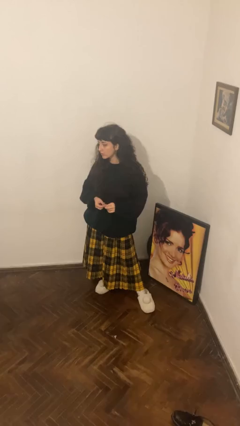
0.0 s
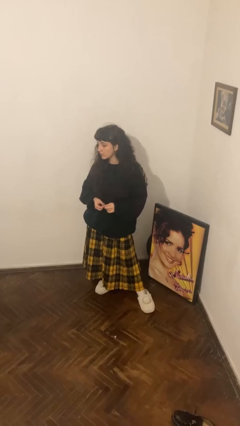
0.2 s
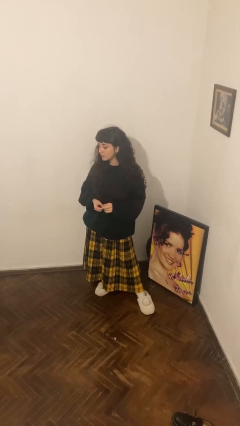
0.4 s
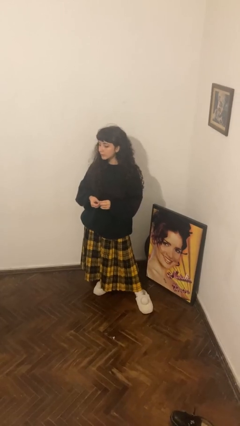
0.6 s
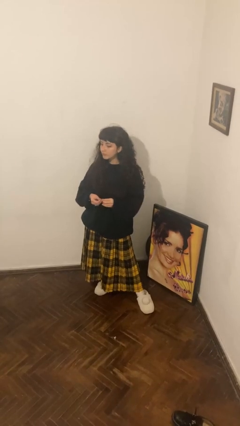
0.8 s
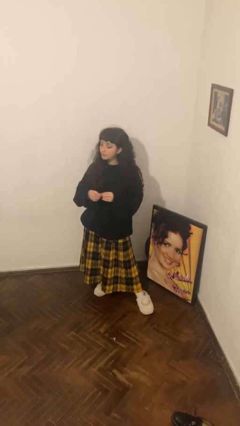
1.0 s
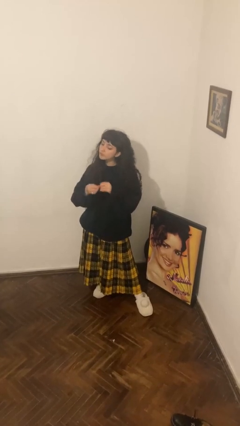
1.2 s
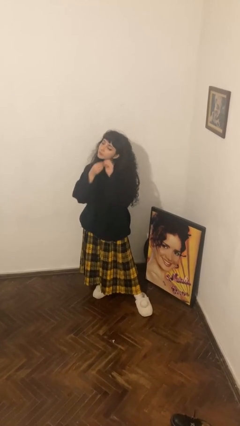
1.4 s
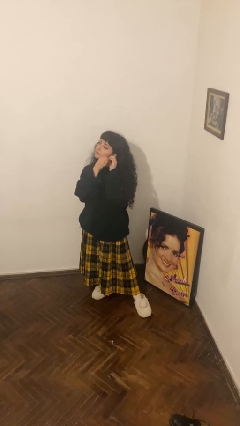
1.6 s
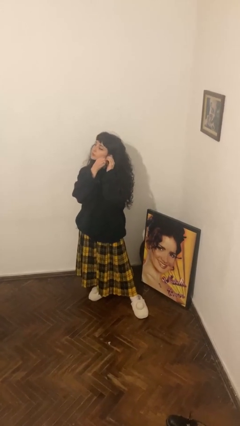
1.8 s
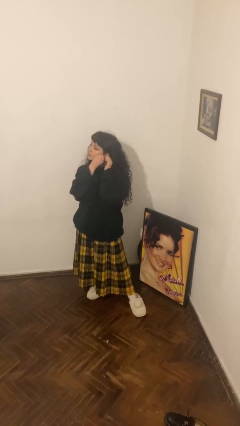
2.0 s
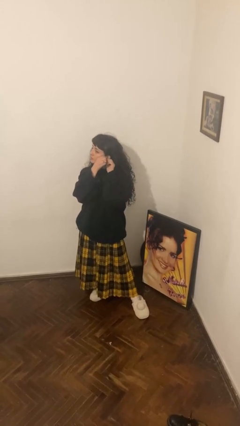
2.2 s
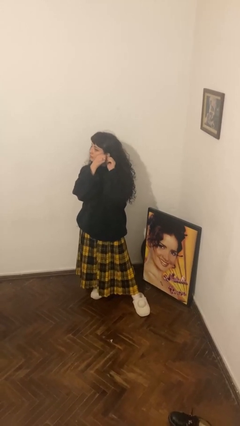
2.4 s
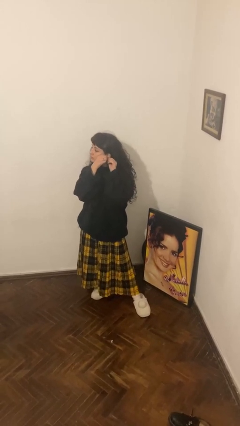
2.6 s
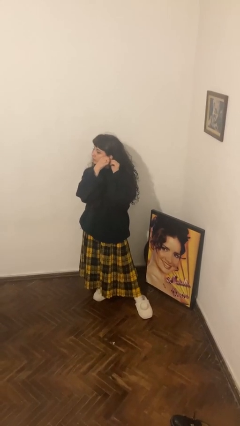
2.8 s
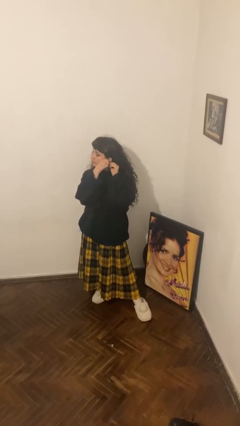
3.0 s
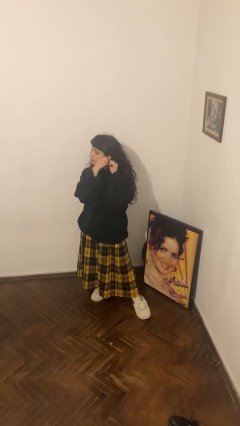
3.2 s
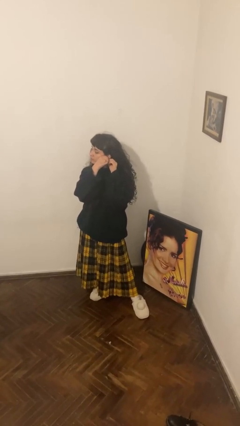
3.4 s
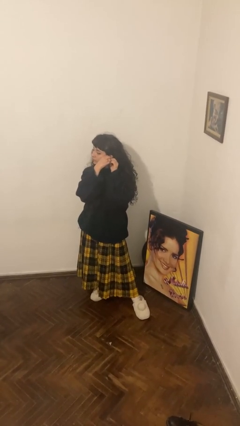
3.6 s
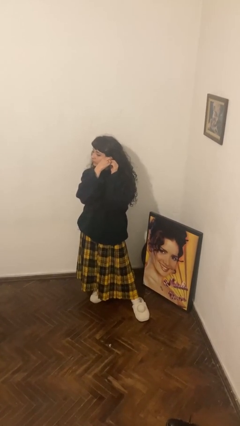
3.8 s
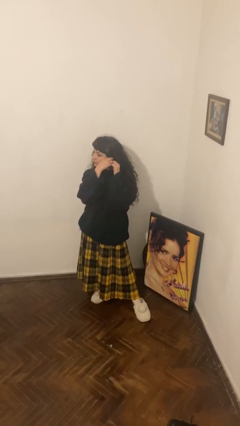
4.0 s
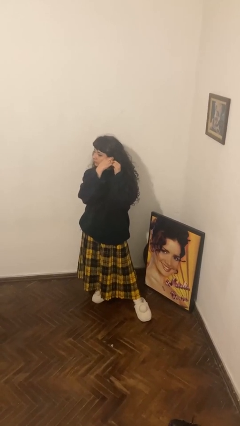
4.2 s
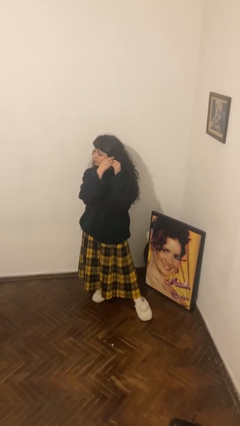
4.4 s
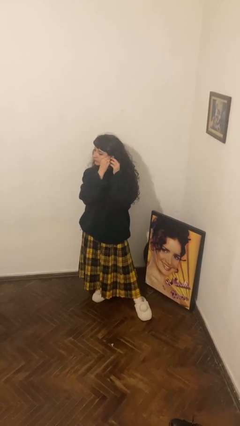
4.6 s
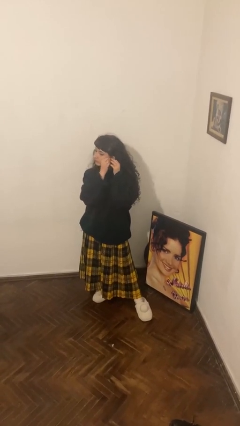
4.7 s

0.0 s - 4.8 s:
person puts on earrings

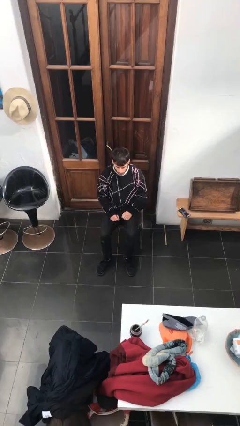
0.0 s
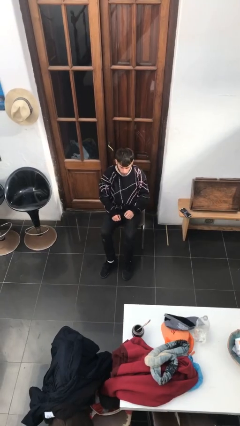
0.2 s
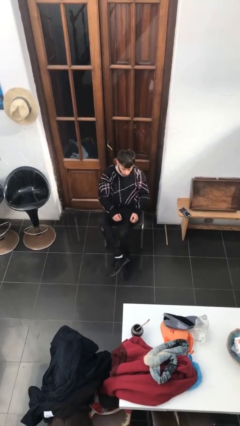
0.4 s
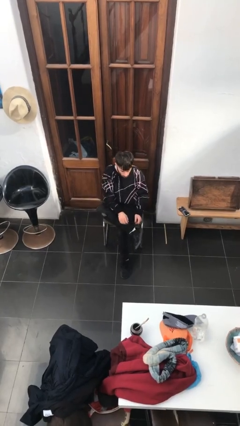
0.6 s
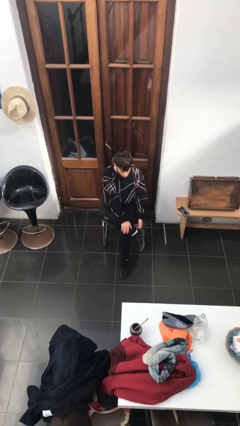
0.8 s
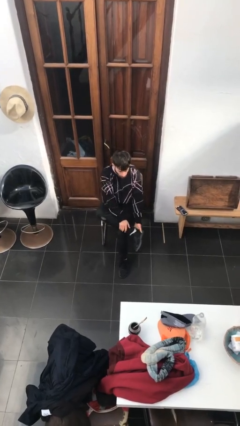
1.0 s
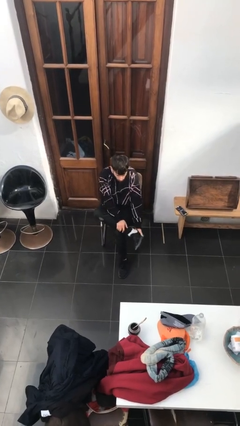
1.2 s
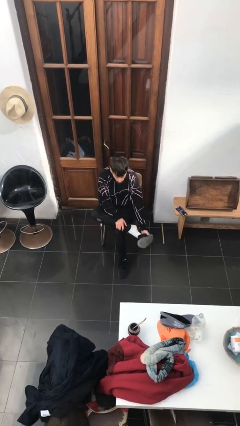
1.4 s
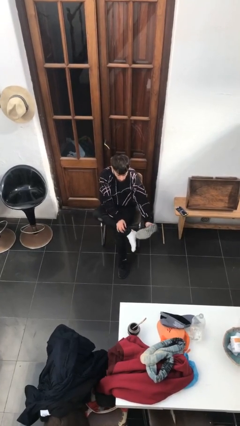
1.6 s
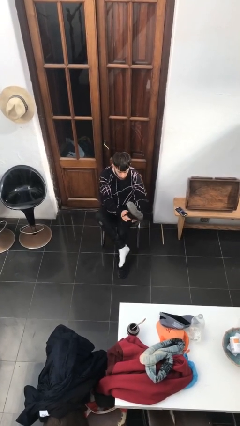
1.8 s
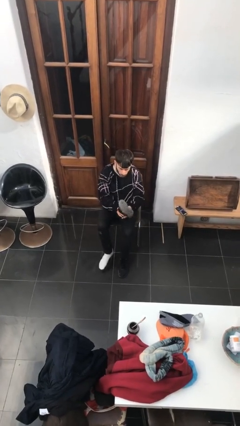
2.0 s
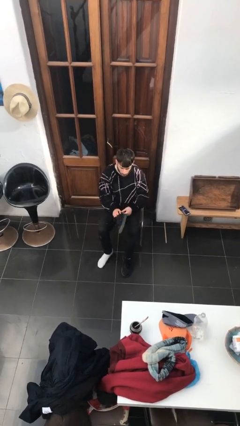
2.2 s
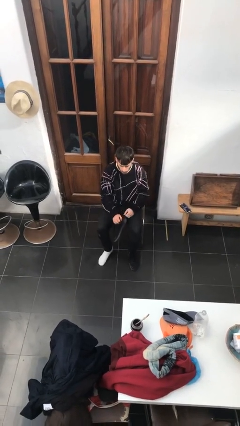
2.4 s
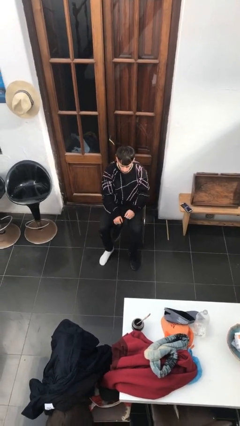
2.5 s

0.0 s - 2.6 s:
person takes off shoes

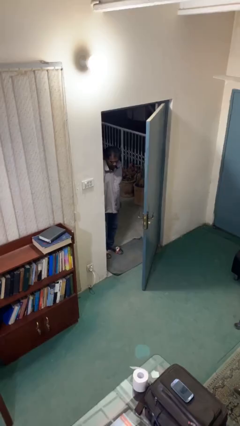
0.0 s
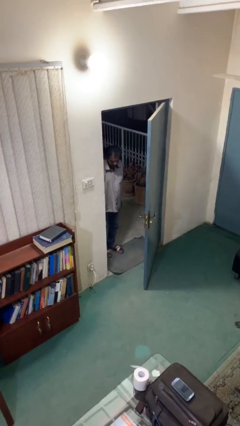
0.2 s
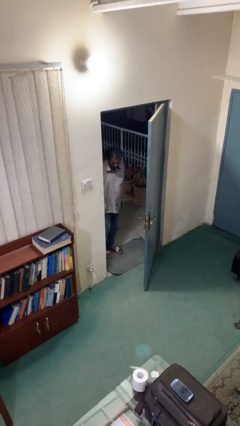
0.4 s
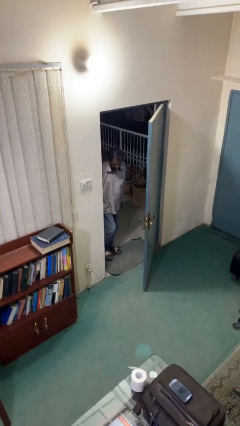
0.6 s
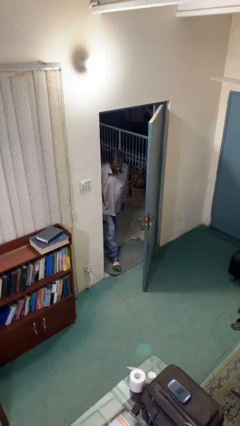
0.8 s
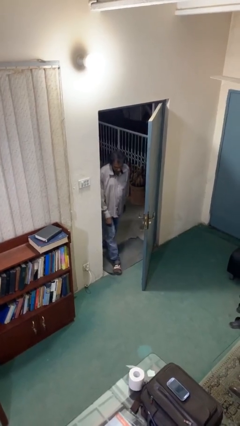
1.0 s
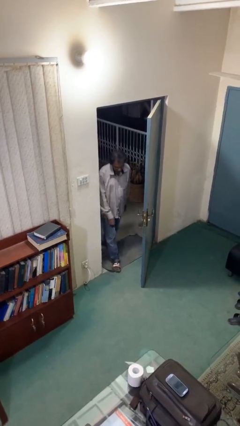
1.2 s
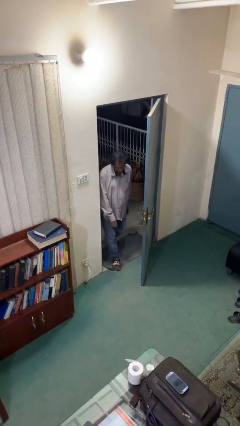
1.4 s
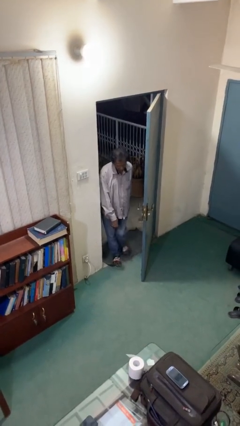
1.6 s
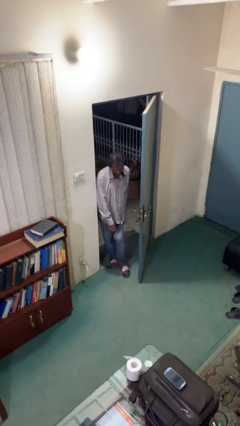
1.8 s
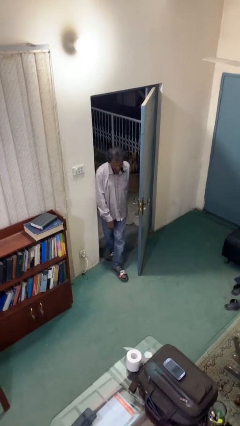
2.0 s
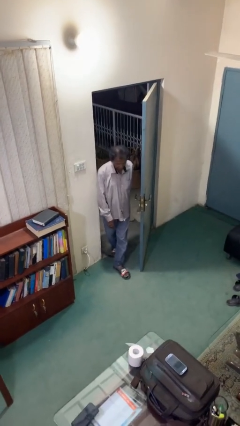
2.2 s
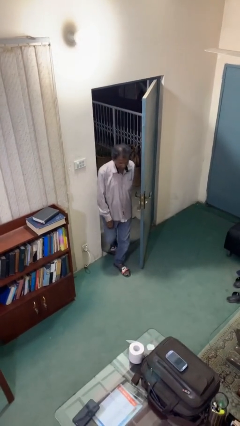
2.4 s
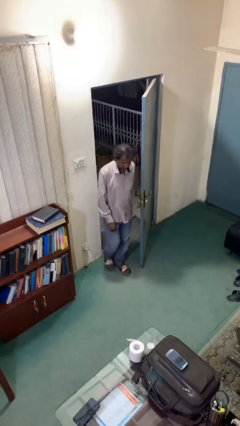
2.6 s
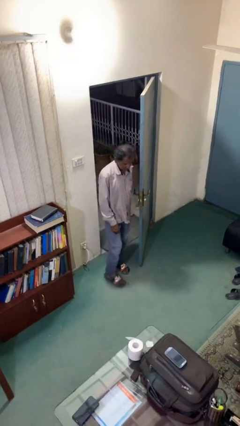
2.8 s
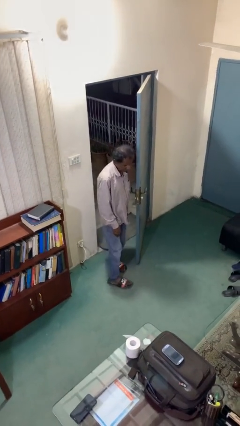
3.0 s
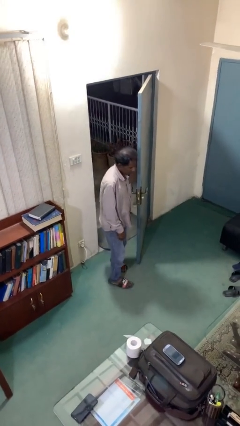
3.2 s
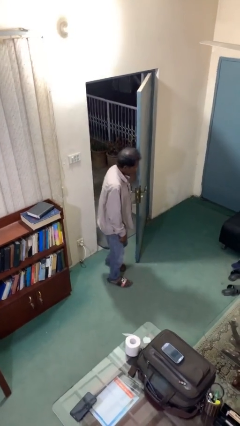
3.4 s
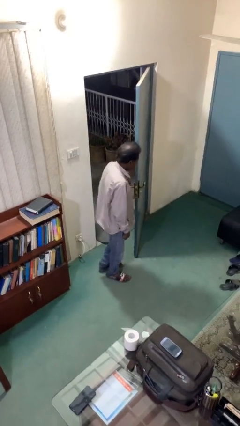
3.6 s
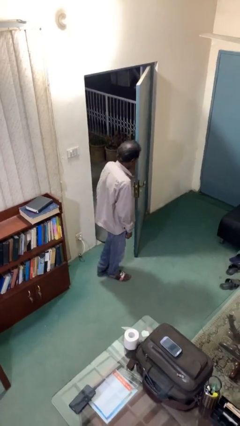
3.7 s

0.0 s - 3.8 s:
person enters scene through structure

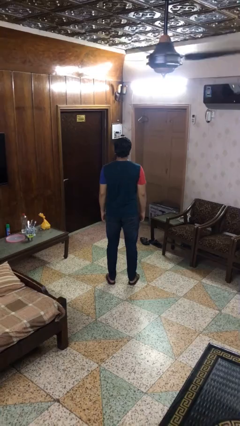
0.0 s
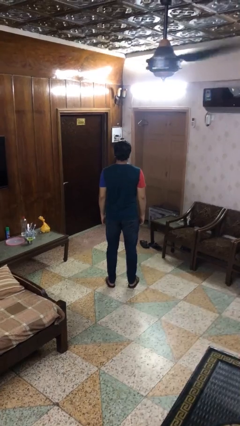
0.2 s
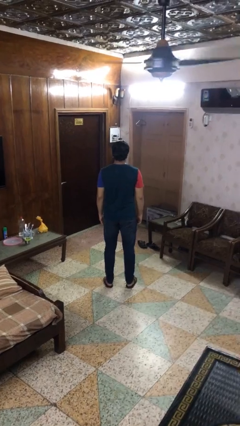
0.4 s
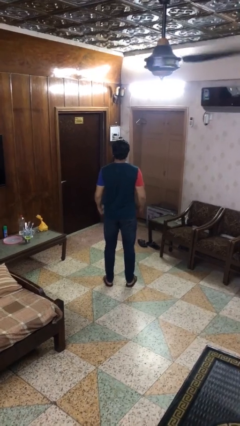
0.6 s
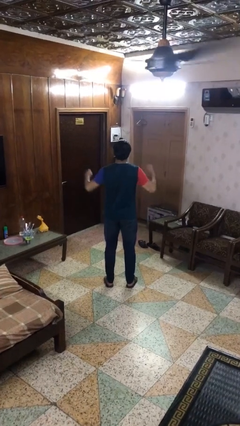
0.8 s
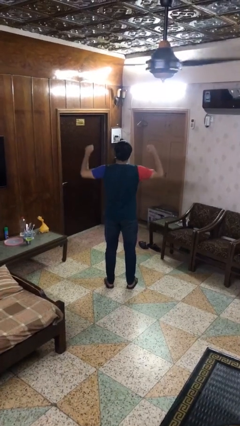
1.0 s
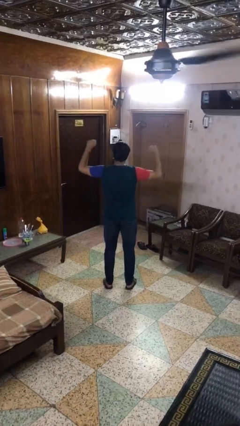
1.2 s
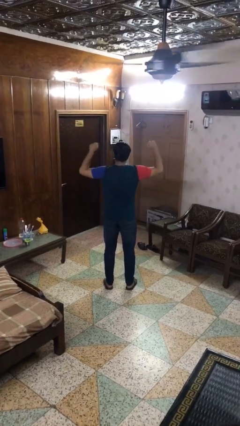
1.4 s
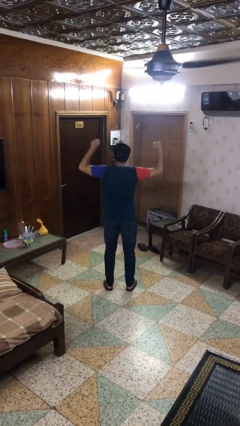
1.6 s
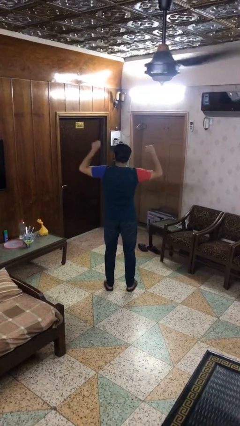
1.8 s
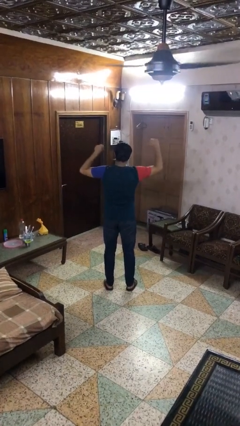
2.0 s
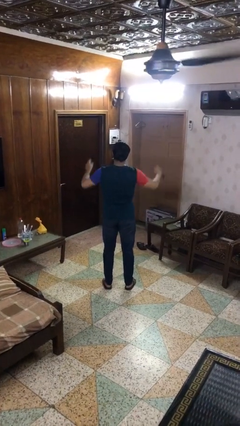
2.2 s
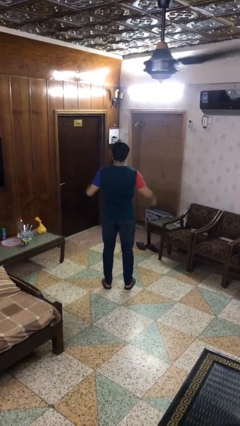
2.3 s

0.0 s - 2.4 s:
person dances in place

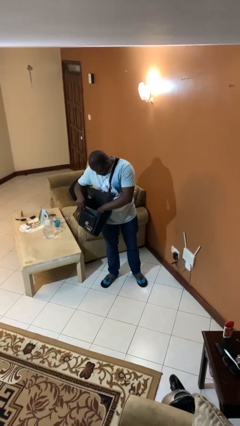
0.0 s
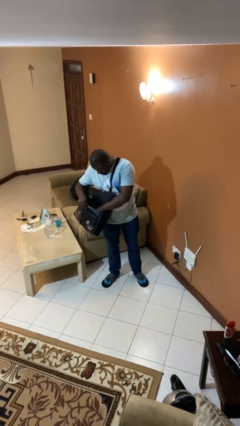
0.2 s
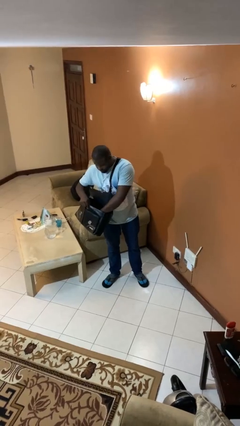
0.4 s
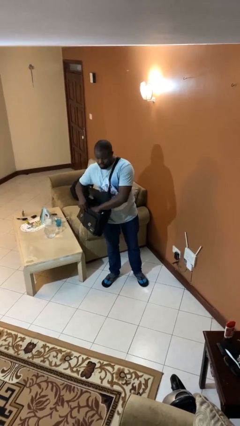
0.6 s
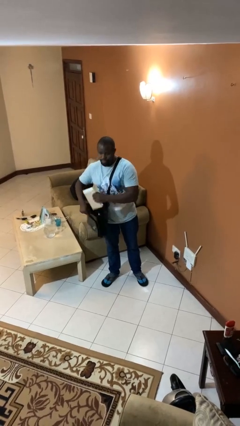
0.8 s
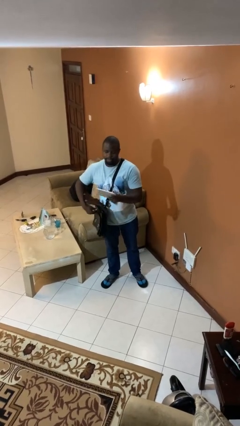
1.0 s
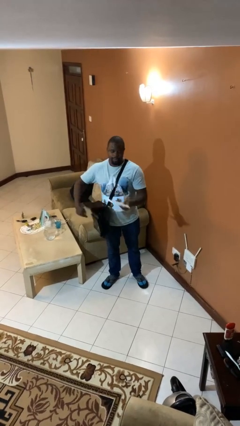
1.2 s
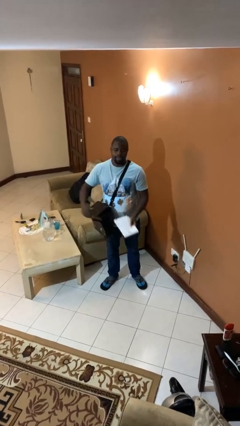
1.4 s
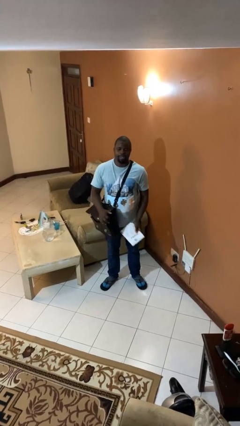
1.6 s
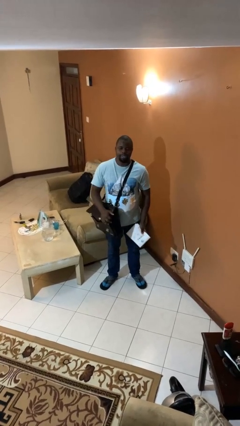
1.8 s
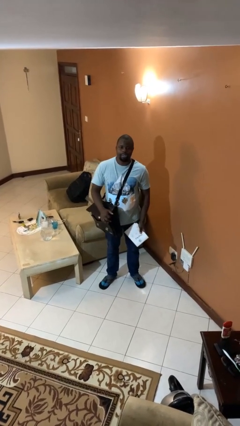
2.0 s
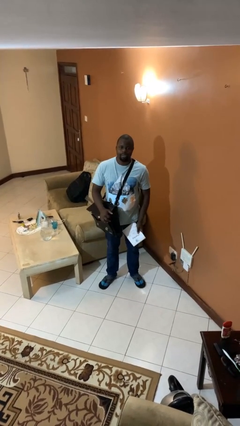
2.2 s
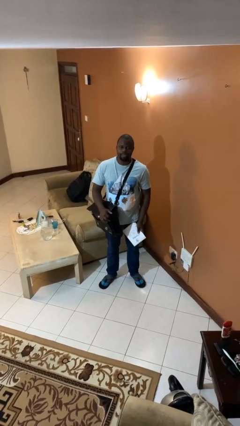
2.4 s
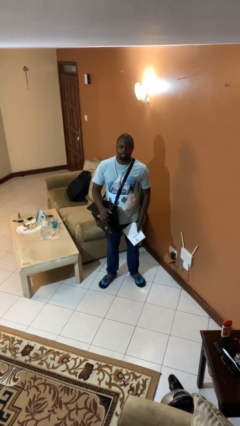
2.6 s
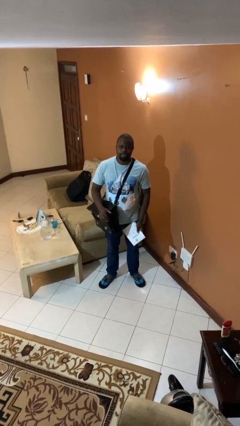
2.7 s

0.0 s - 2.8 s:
person takes object from purse

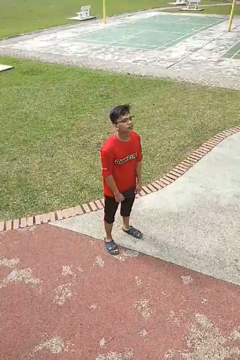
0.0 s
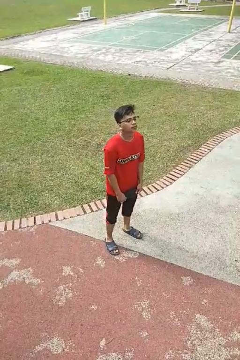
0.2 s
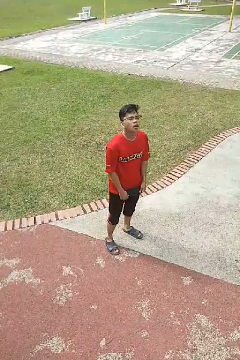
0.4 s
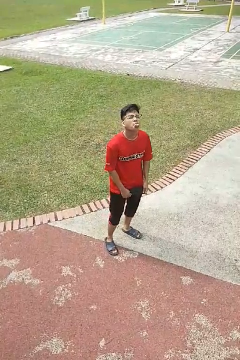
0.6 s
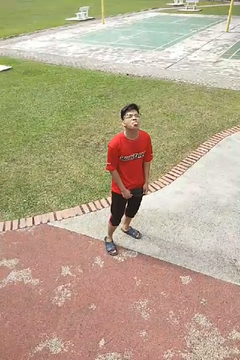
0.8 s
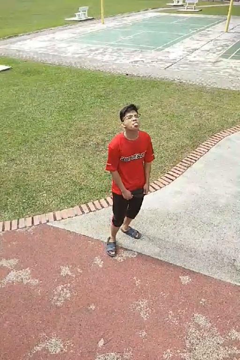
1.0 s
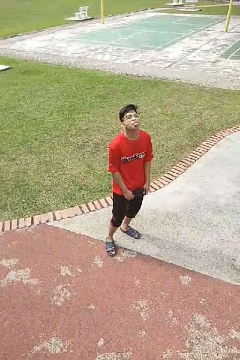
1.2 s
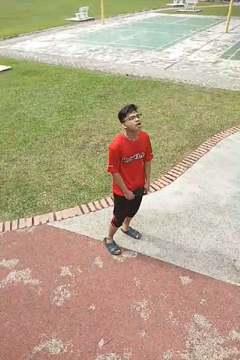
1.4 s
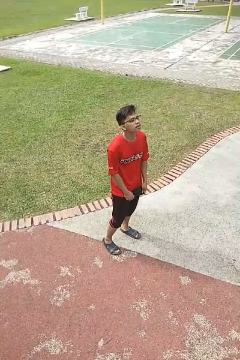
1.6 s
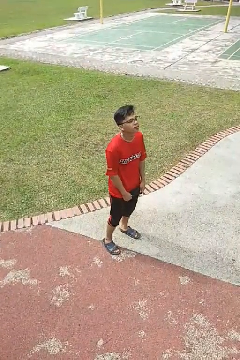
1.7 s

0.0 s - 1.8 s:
person sticks out tongue
